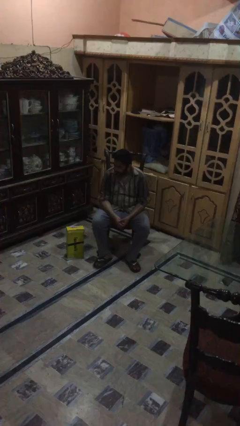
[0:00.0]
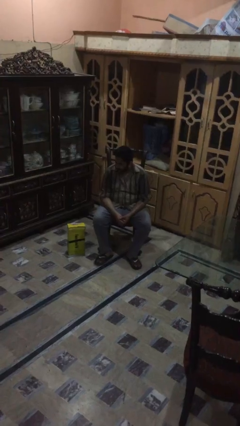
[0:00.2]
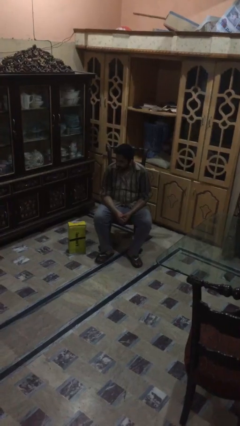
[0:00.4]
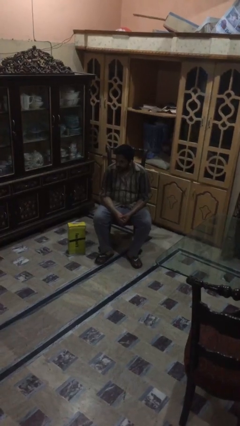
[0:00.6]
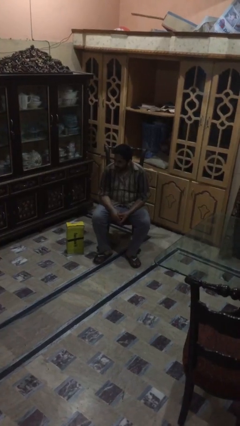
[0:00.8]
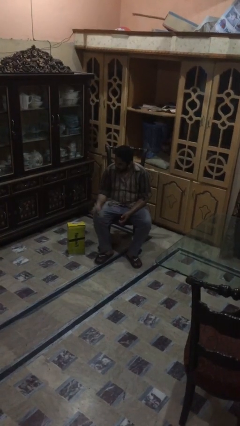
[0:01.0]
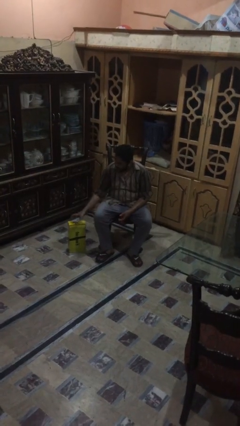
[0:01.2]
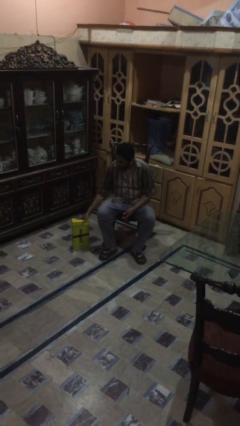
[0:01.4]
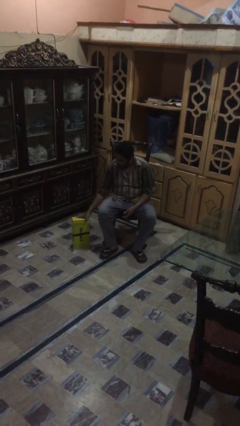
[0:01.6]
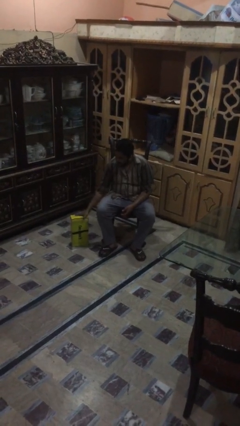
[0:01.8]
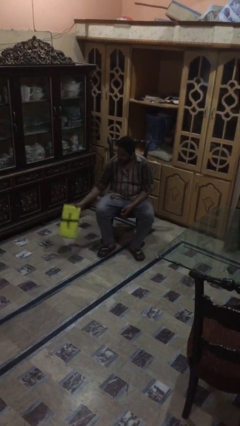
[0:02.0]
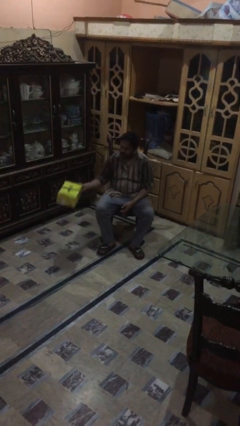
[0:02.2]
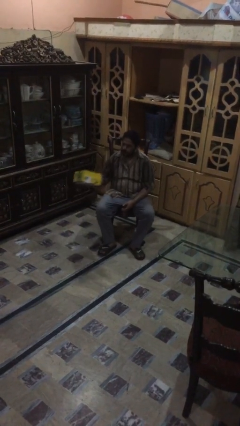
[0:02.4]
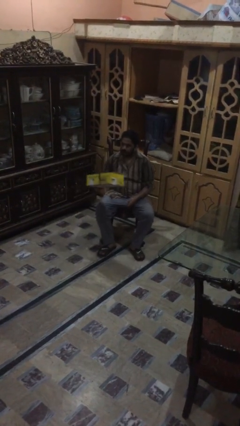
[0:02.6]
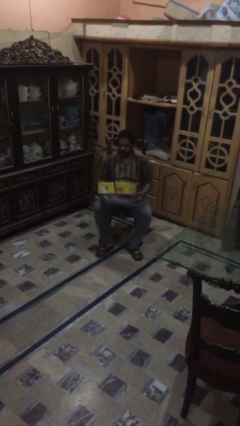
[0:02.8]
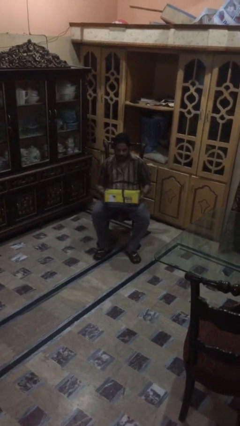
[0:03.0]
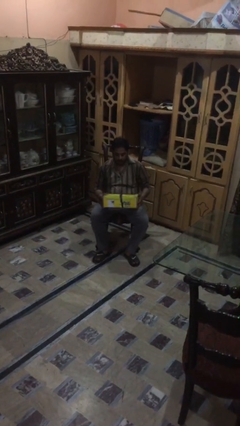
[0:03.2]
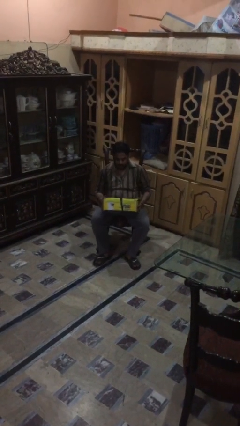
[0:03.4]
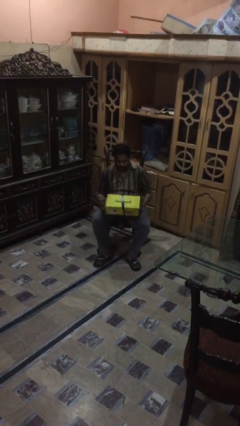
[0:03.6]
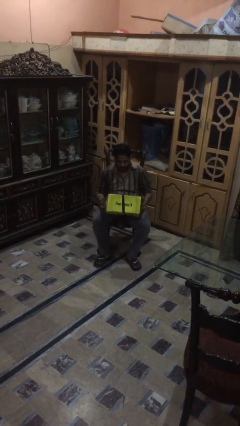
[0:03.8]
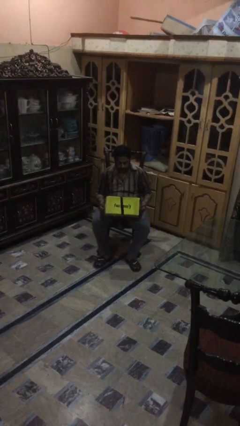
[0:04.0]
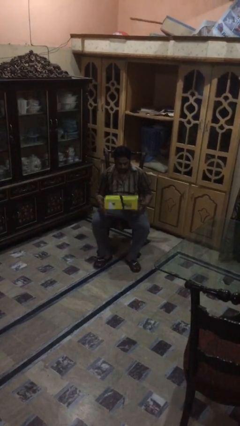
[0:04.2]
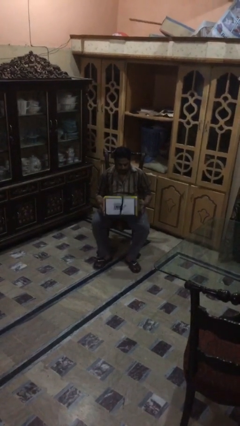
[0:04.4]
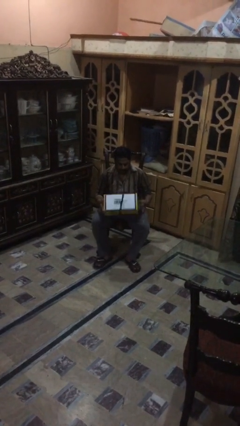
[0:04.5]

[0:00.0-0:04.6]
person picks up object from floor

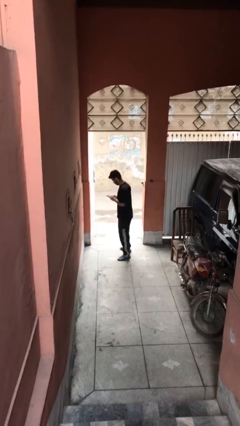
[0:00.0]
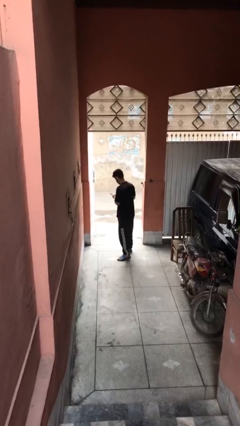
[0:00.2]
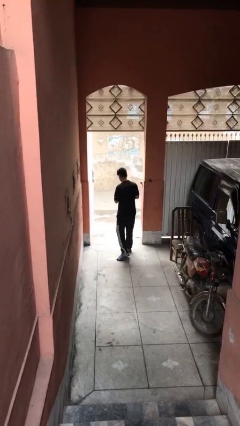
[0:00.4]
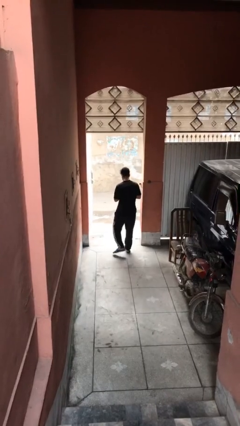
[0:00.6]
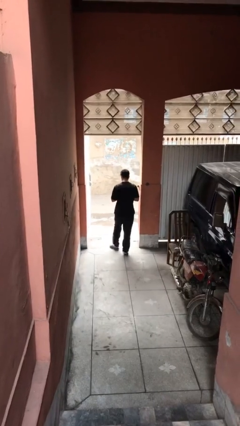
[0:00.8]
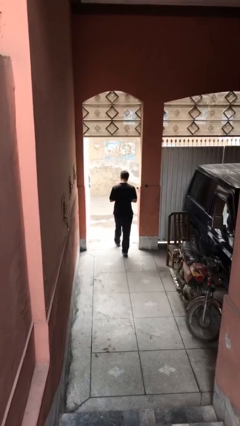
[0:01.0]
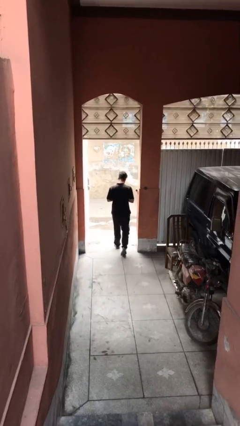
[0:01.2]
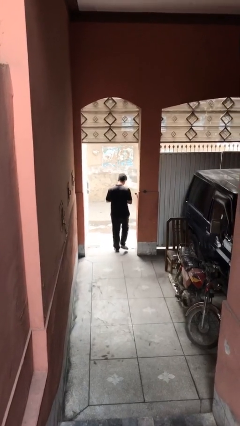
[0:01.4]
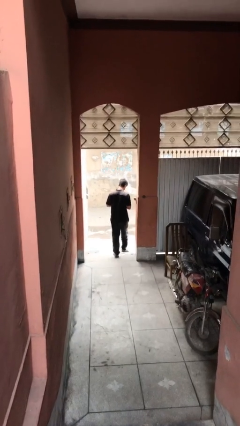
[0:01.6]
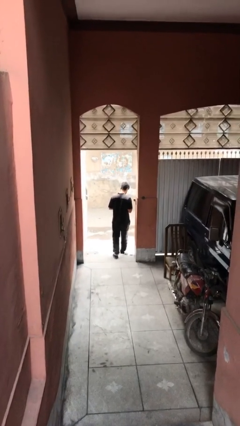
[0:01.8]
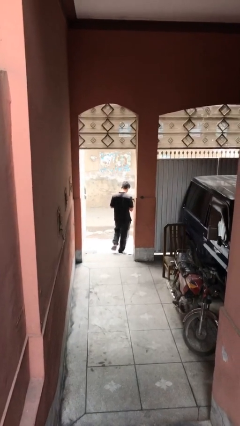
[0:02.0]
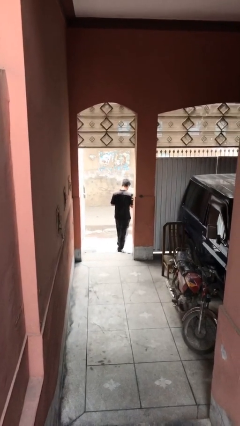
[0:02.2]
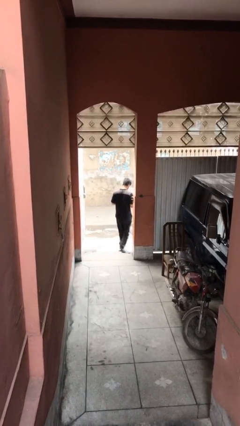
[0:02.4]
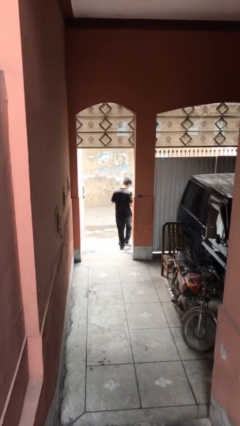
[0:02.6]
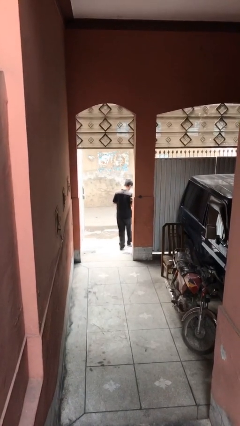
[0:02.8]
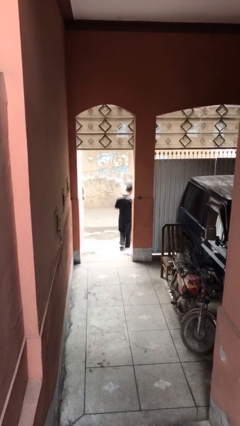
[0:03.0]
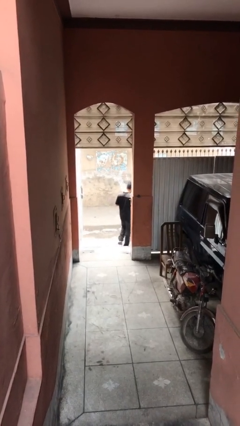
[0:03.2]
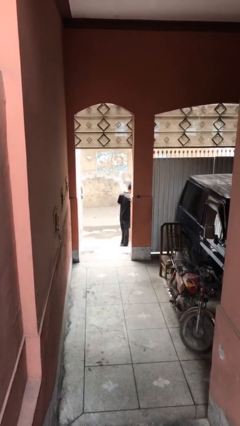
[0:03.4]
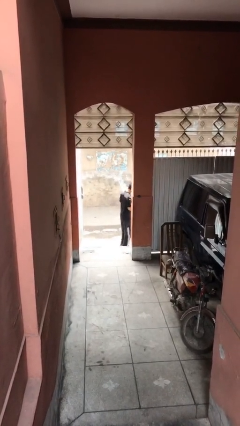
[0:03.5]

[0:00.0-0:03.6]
person exits scene through structure

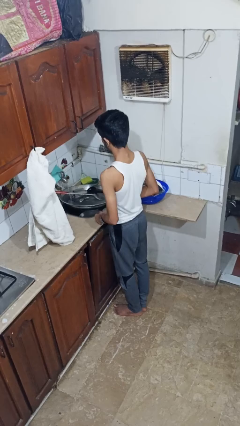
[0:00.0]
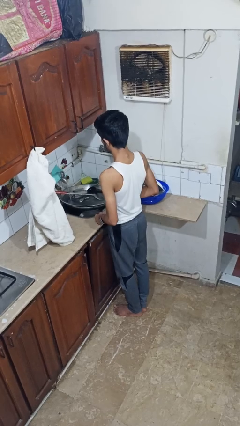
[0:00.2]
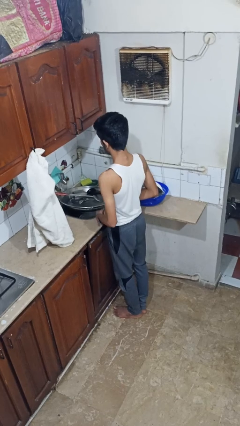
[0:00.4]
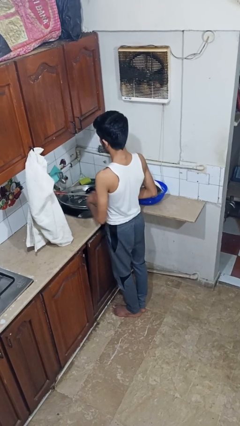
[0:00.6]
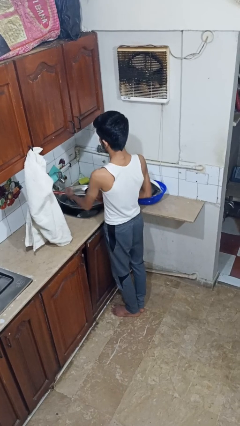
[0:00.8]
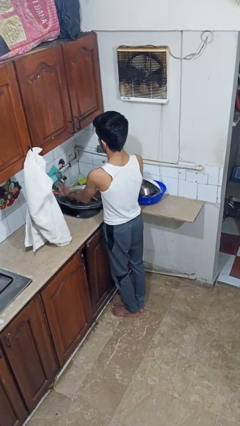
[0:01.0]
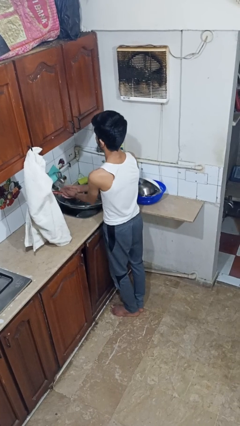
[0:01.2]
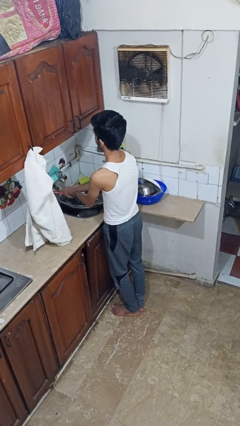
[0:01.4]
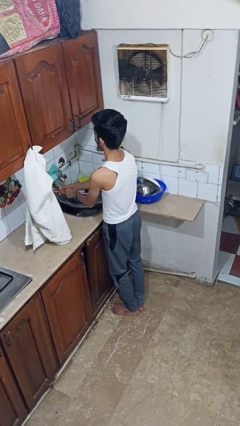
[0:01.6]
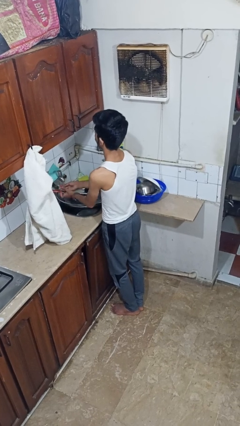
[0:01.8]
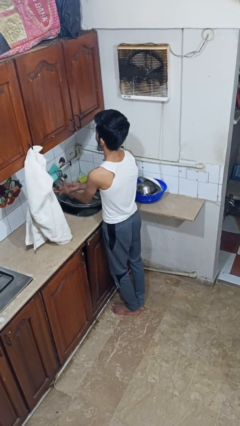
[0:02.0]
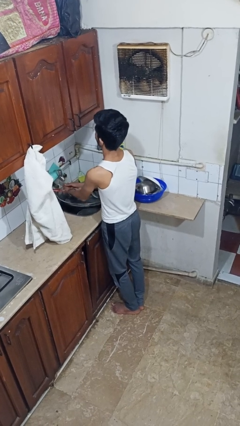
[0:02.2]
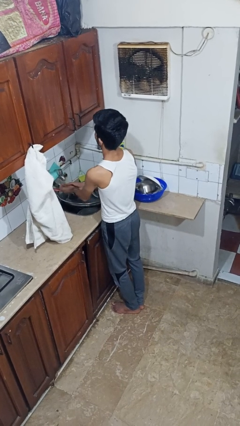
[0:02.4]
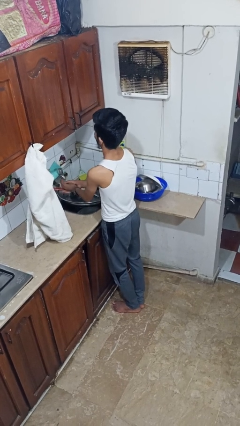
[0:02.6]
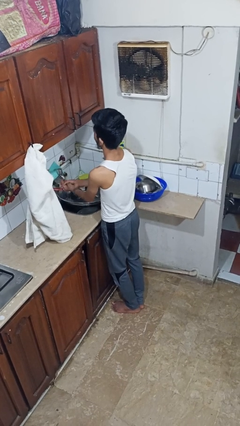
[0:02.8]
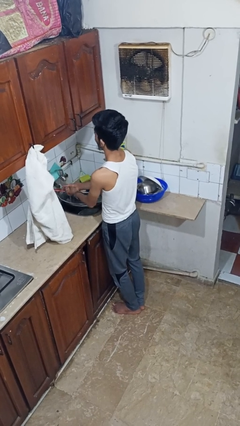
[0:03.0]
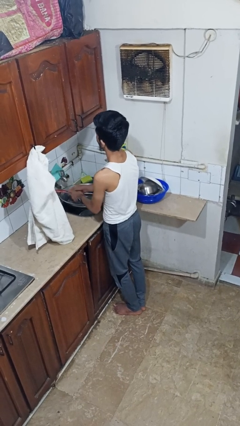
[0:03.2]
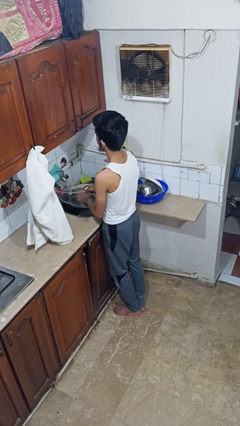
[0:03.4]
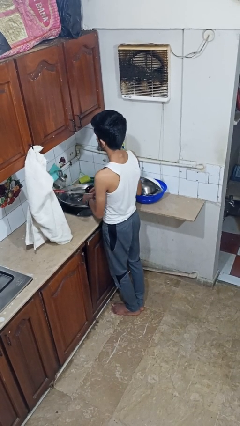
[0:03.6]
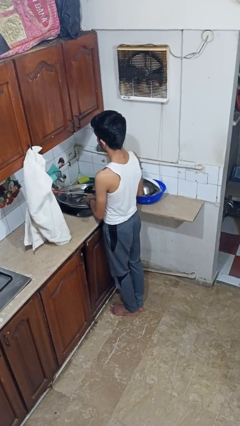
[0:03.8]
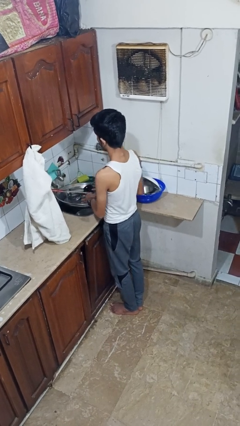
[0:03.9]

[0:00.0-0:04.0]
person washes hands

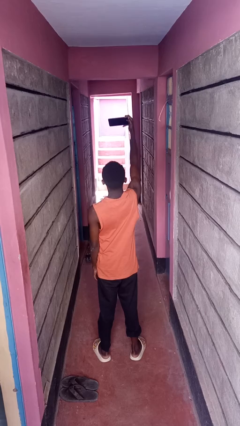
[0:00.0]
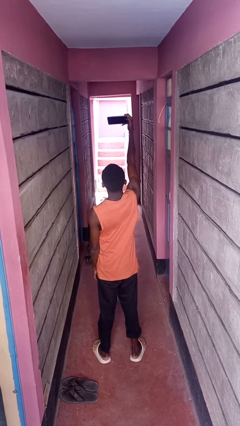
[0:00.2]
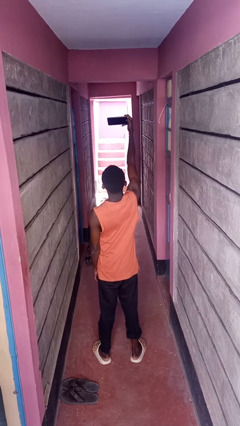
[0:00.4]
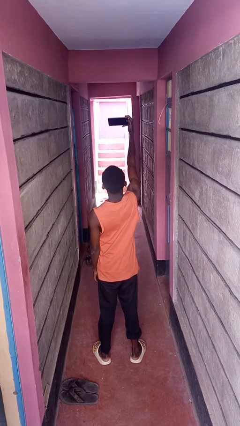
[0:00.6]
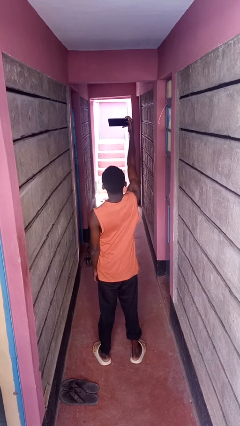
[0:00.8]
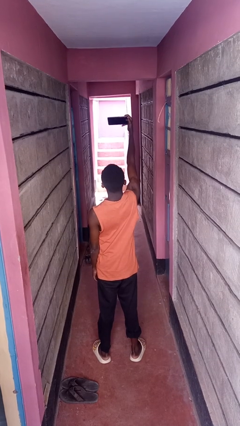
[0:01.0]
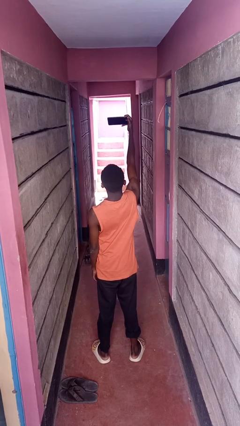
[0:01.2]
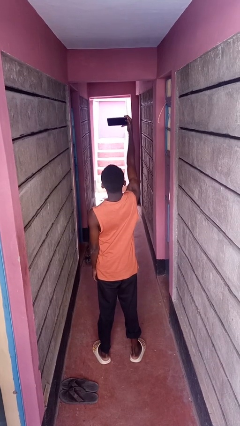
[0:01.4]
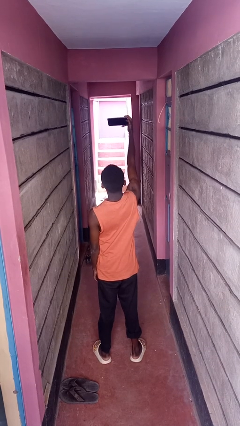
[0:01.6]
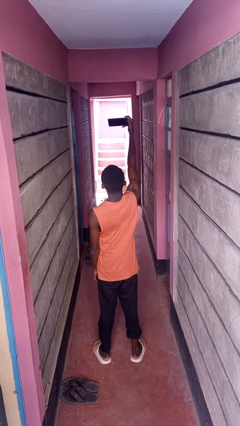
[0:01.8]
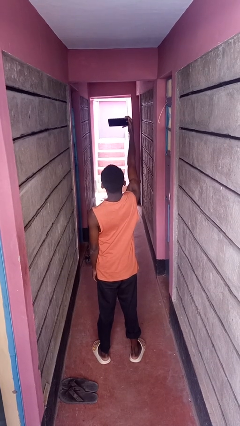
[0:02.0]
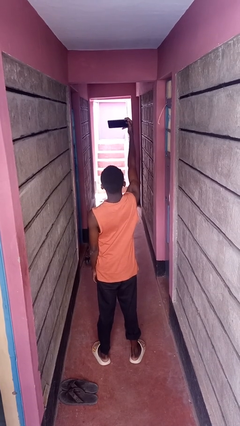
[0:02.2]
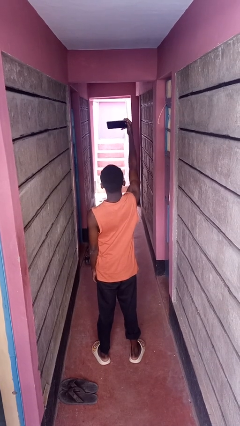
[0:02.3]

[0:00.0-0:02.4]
person takes selfie

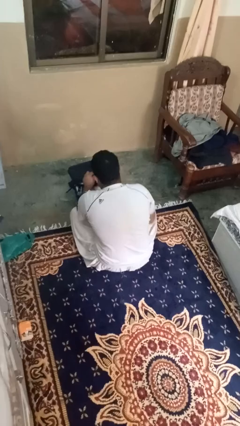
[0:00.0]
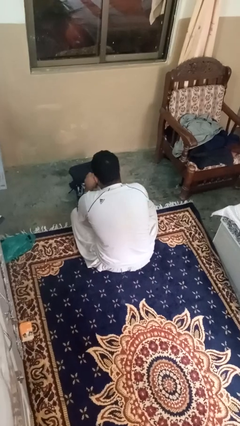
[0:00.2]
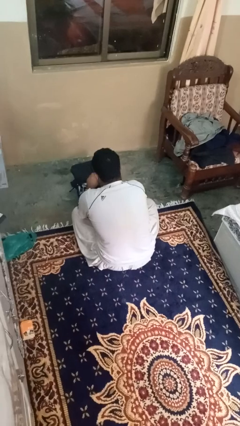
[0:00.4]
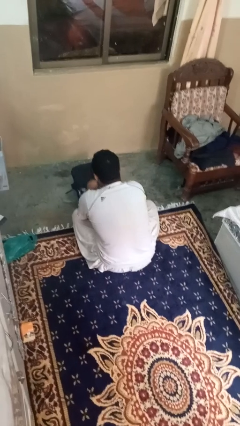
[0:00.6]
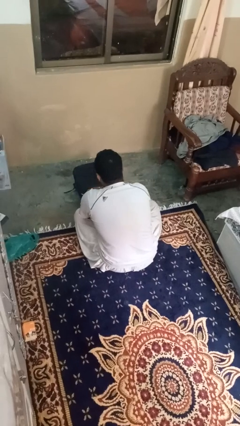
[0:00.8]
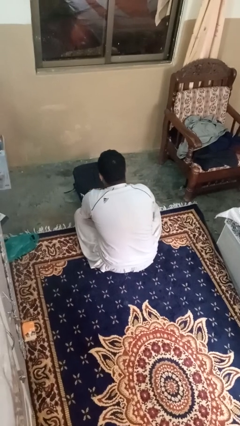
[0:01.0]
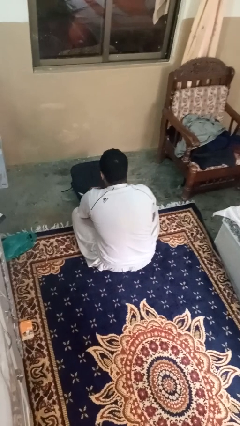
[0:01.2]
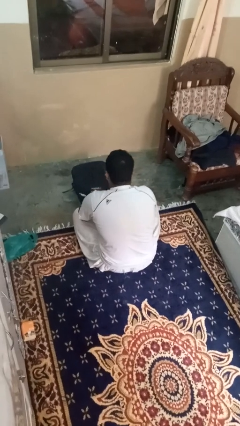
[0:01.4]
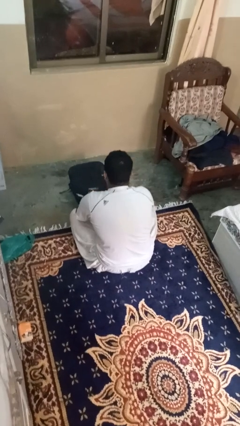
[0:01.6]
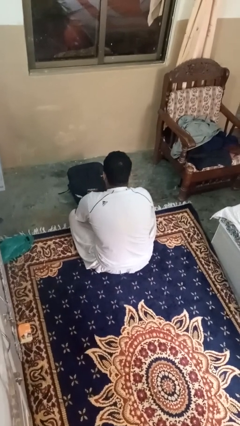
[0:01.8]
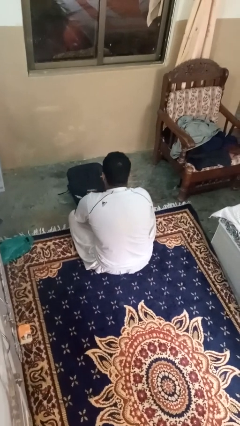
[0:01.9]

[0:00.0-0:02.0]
person puts object into bag

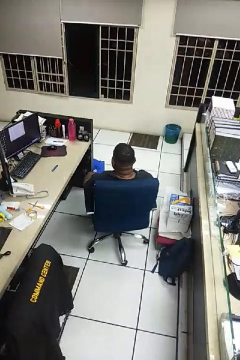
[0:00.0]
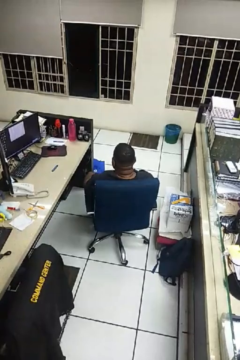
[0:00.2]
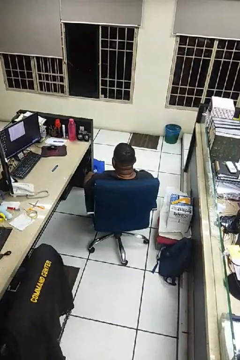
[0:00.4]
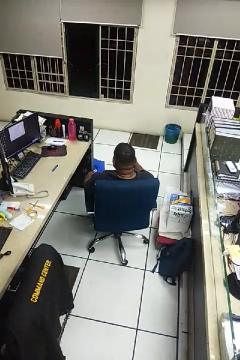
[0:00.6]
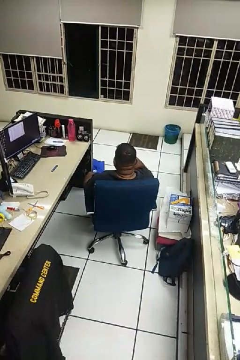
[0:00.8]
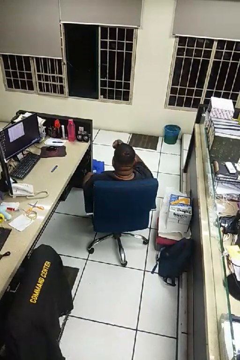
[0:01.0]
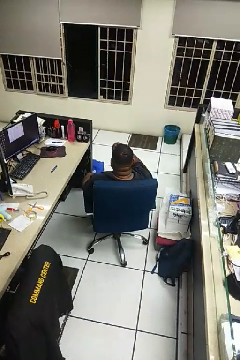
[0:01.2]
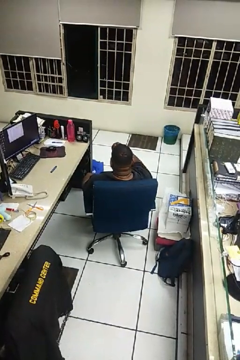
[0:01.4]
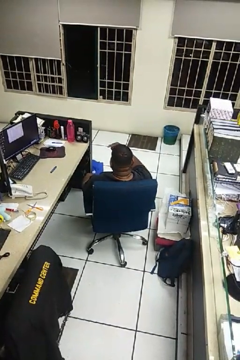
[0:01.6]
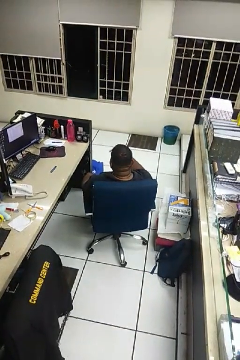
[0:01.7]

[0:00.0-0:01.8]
person gestures watch closely
